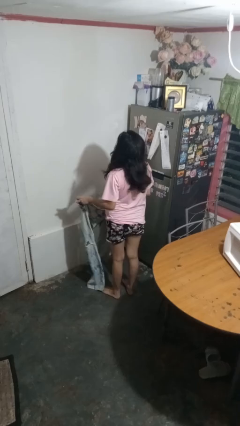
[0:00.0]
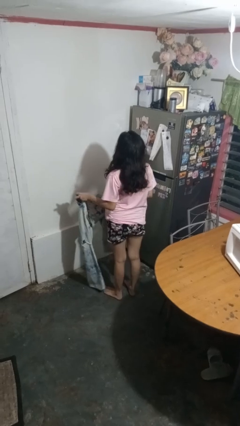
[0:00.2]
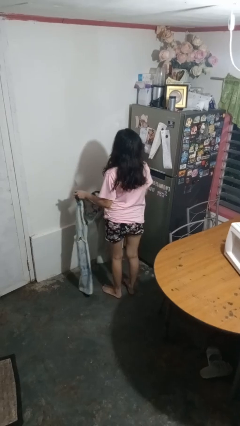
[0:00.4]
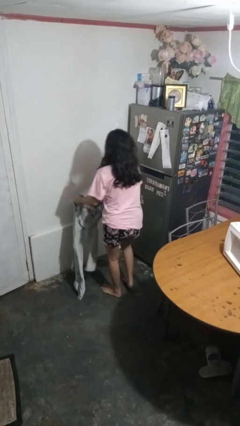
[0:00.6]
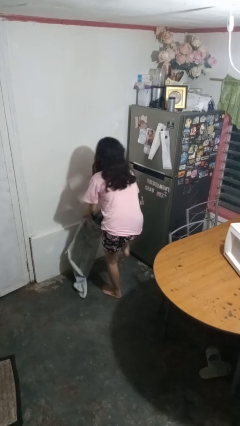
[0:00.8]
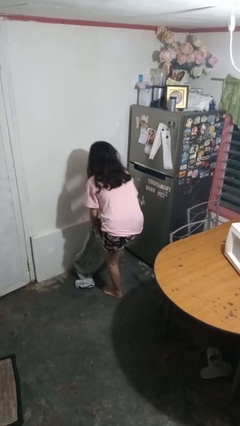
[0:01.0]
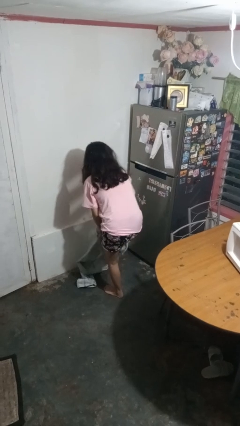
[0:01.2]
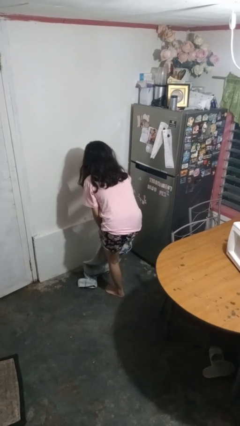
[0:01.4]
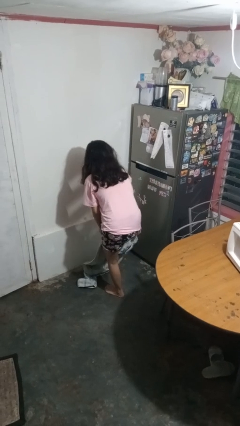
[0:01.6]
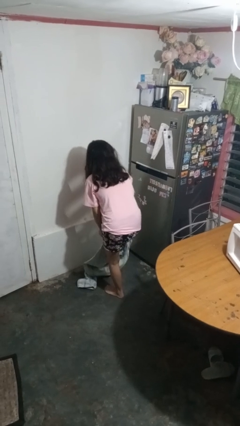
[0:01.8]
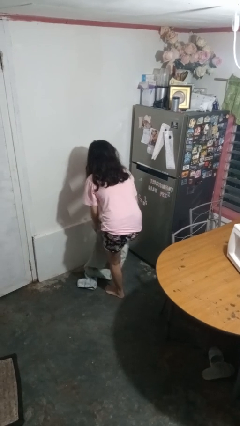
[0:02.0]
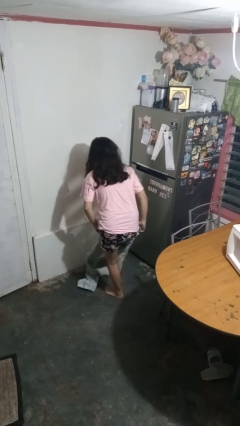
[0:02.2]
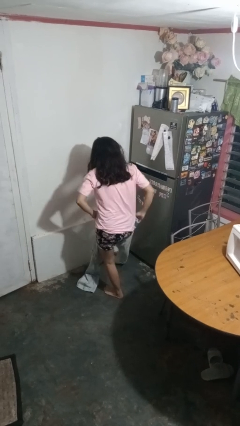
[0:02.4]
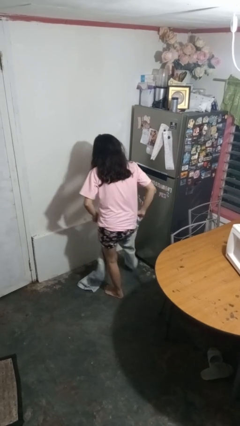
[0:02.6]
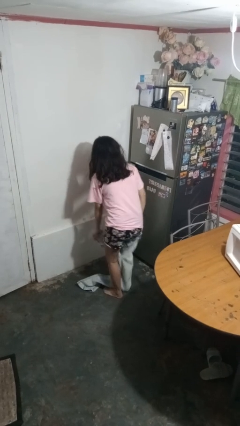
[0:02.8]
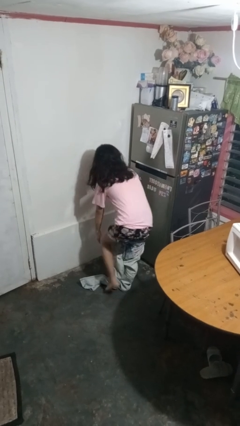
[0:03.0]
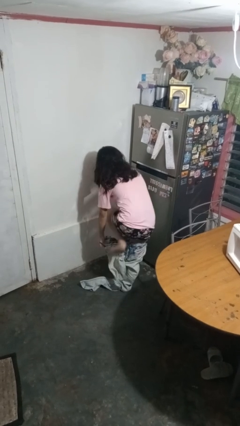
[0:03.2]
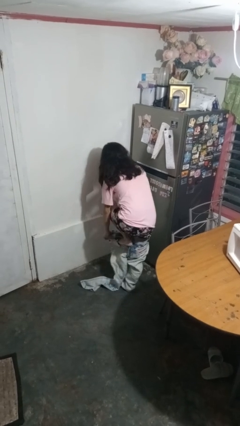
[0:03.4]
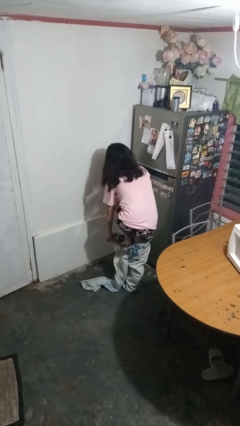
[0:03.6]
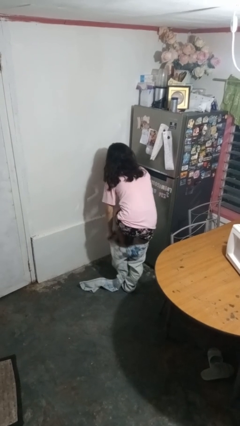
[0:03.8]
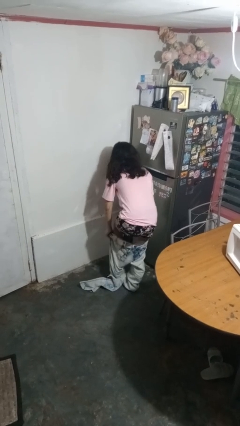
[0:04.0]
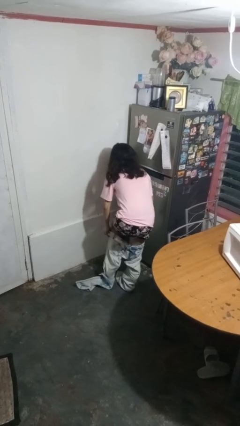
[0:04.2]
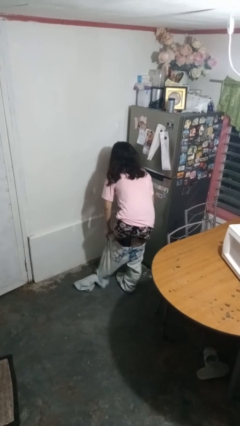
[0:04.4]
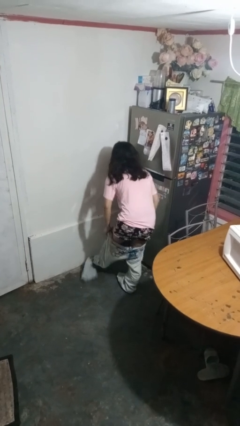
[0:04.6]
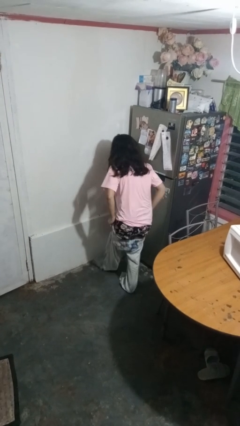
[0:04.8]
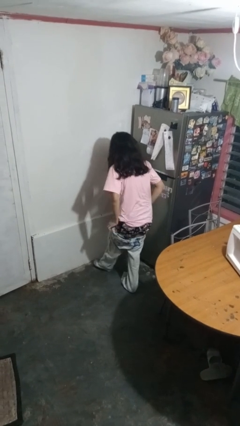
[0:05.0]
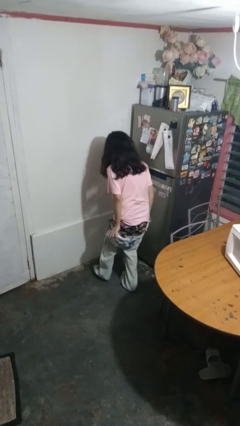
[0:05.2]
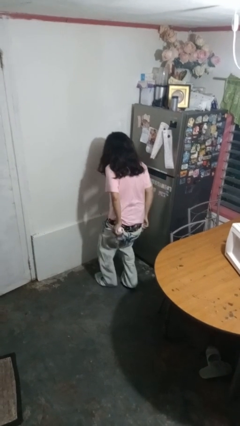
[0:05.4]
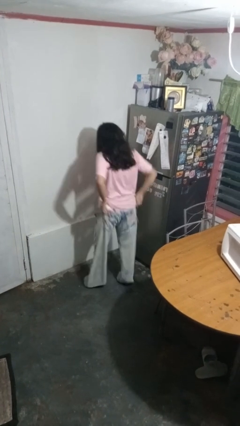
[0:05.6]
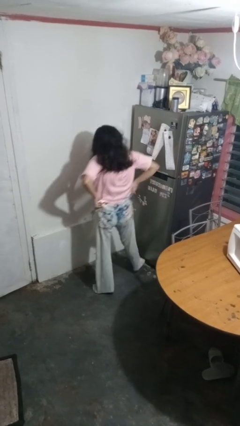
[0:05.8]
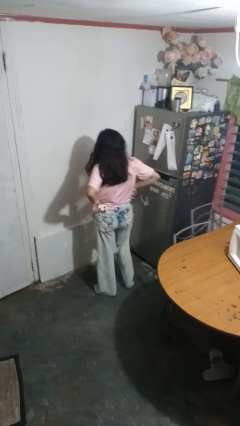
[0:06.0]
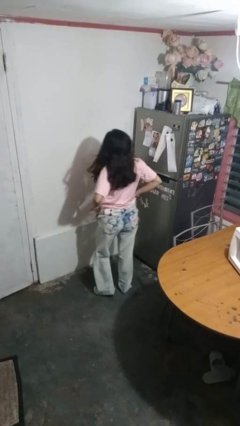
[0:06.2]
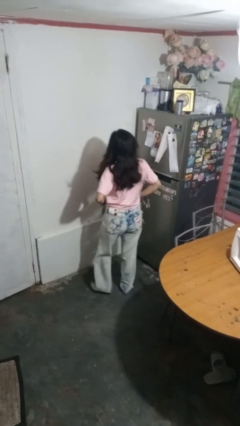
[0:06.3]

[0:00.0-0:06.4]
person puts on pants

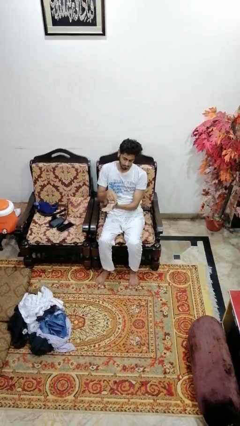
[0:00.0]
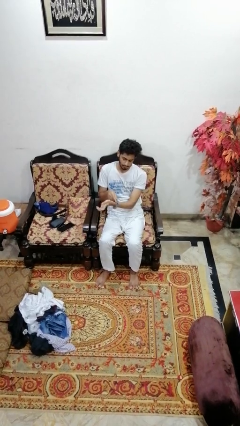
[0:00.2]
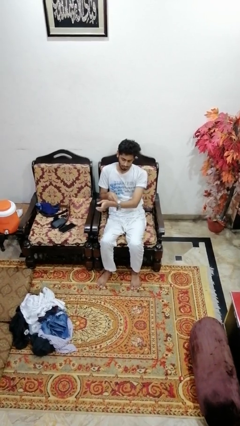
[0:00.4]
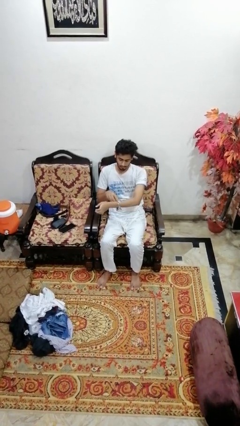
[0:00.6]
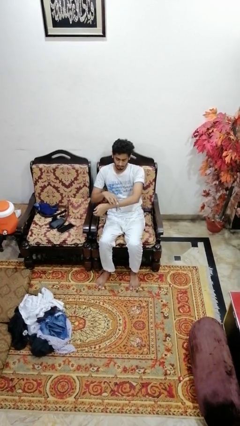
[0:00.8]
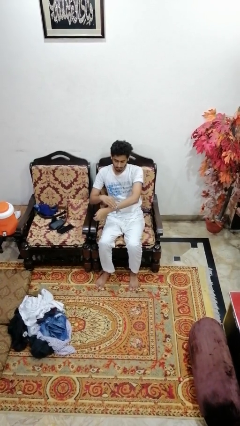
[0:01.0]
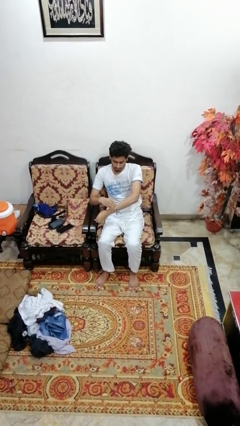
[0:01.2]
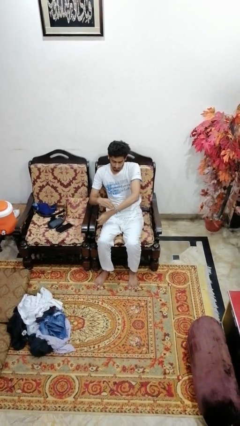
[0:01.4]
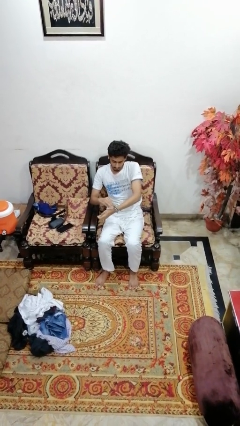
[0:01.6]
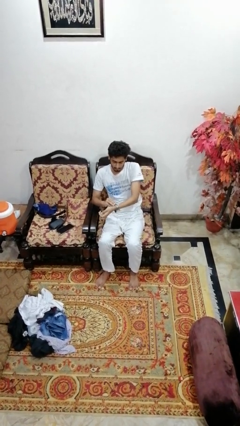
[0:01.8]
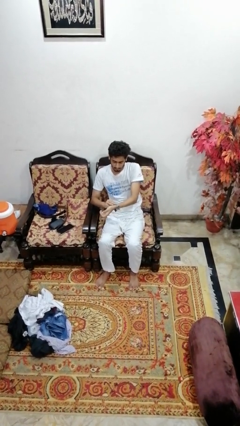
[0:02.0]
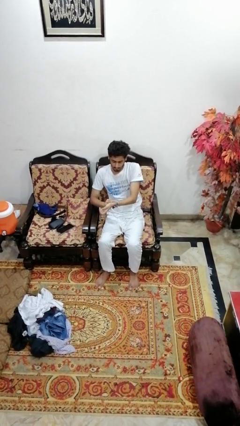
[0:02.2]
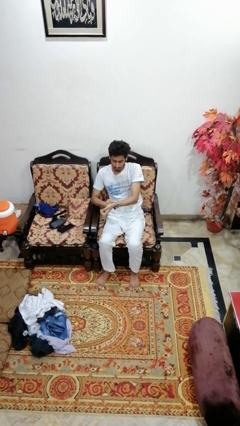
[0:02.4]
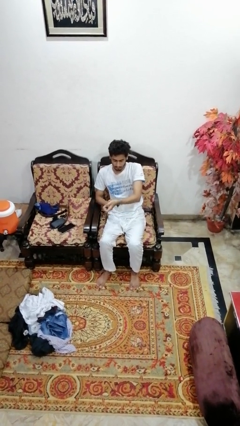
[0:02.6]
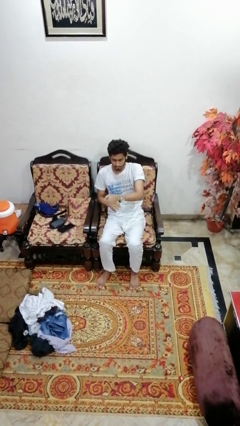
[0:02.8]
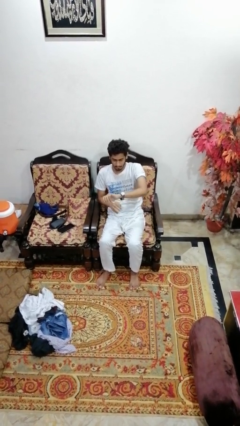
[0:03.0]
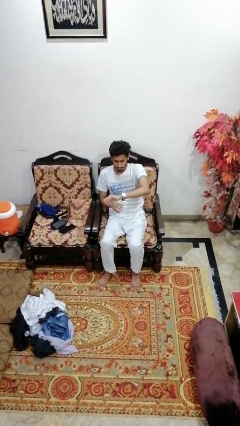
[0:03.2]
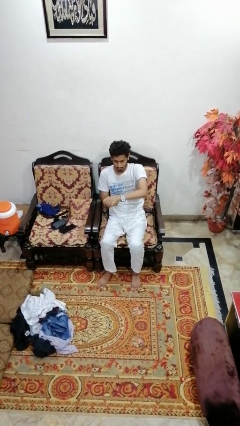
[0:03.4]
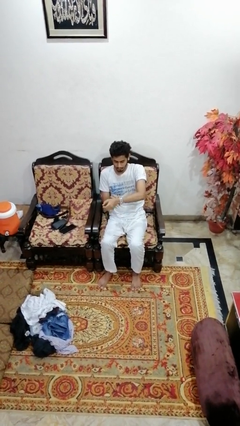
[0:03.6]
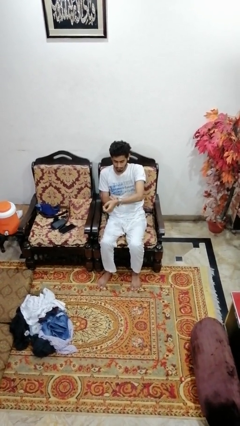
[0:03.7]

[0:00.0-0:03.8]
person puts on wristwatch

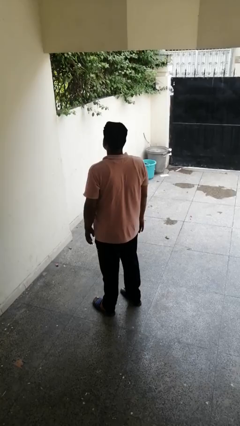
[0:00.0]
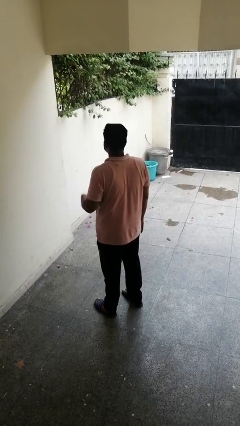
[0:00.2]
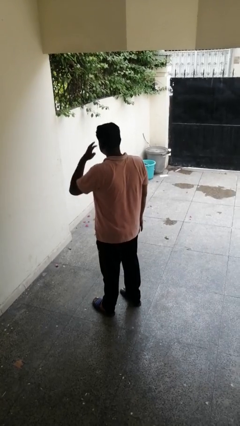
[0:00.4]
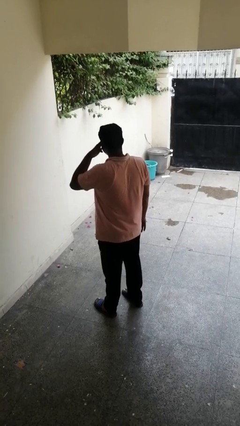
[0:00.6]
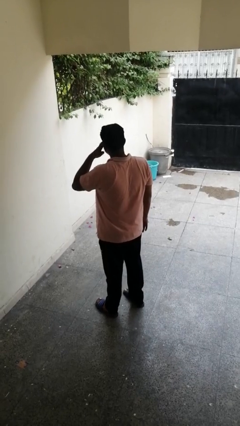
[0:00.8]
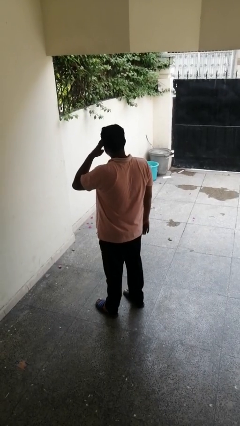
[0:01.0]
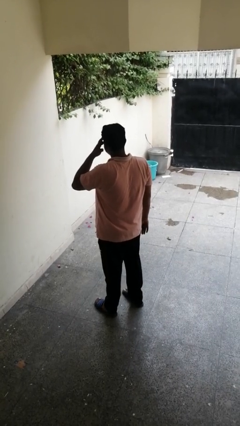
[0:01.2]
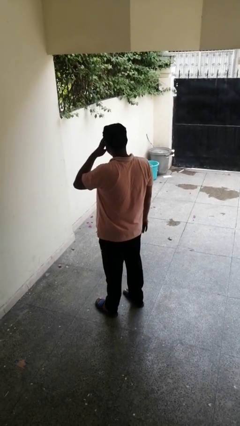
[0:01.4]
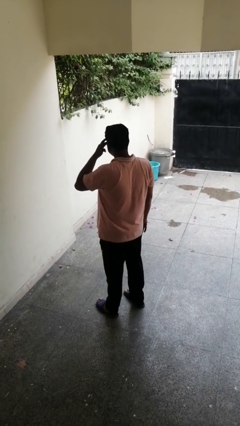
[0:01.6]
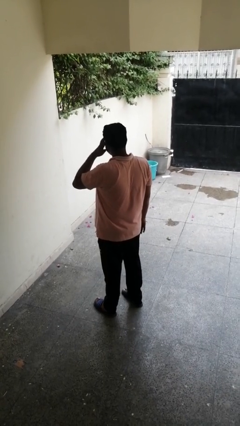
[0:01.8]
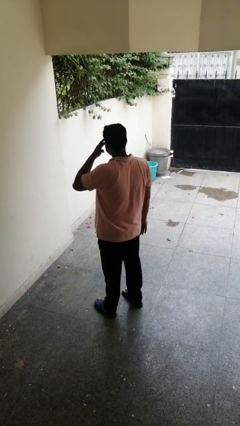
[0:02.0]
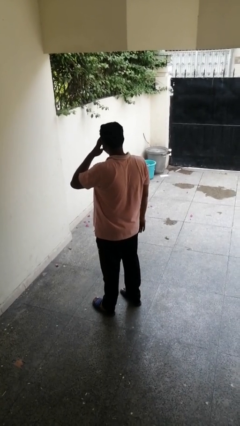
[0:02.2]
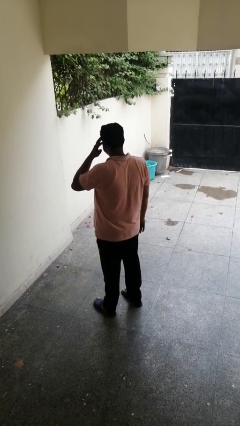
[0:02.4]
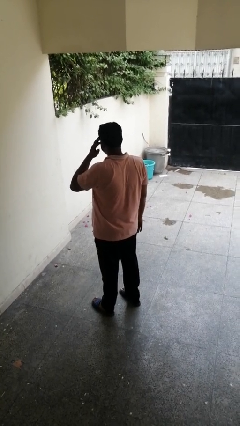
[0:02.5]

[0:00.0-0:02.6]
person rubs eyes

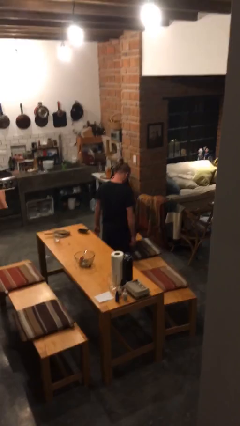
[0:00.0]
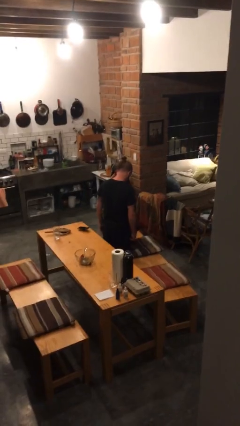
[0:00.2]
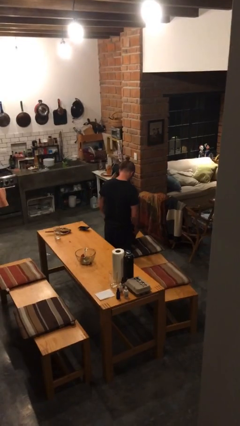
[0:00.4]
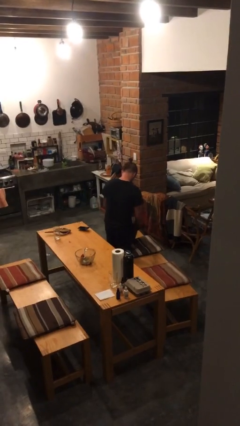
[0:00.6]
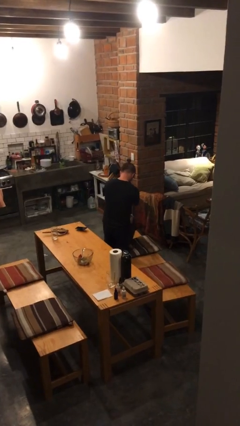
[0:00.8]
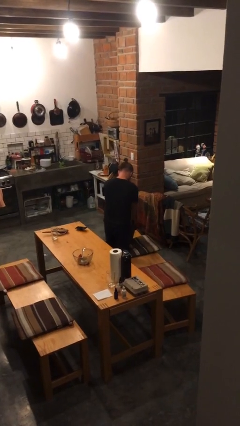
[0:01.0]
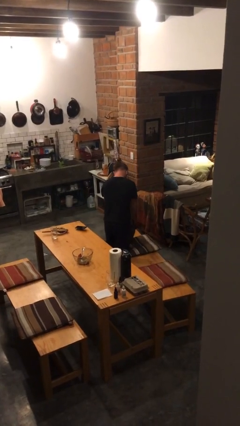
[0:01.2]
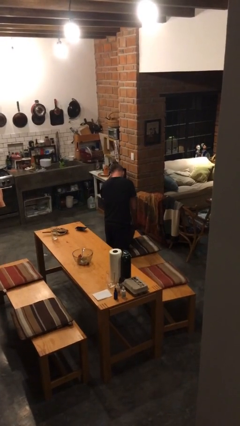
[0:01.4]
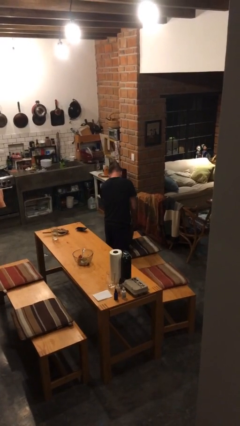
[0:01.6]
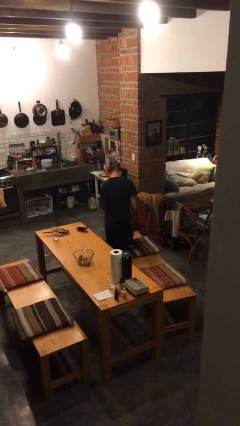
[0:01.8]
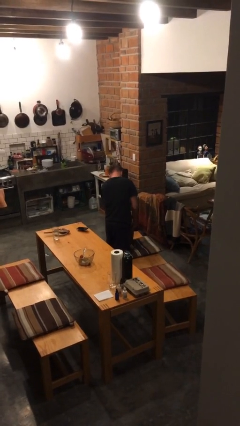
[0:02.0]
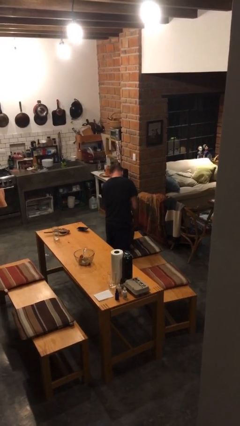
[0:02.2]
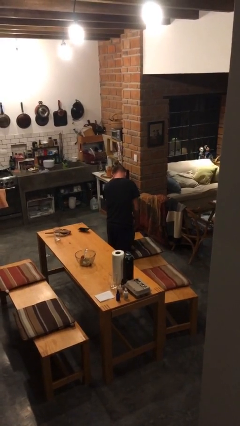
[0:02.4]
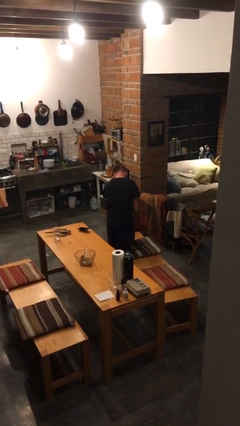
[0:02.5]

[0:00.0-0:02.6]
person searches in bag

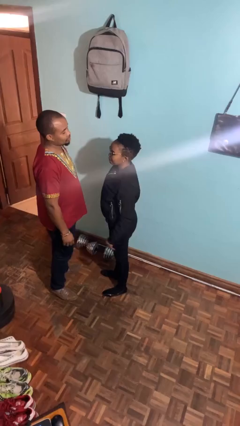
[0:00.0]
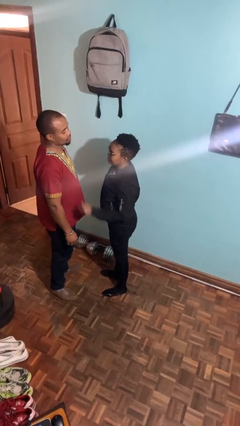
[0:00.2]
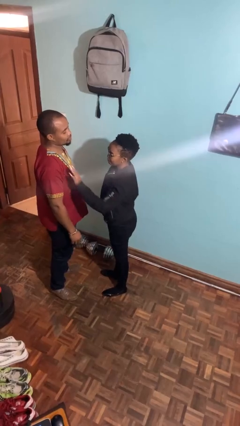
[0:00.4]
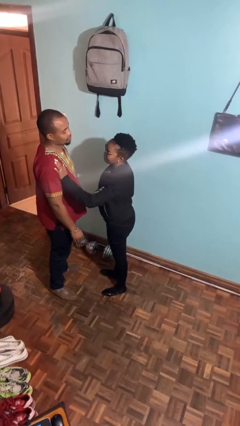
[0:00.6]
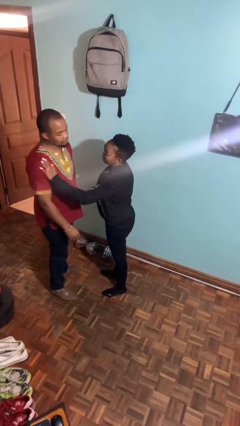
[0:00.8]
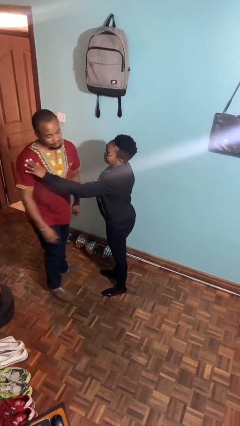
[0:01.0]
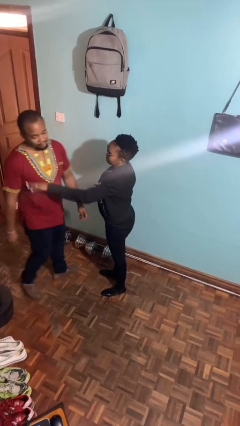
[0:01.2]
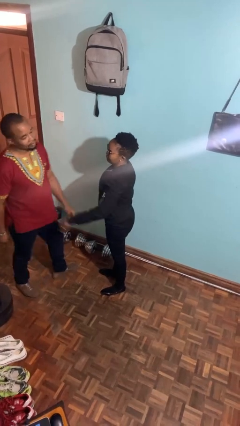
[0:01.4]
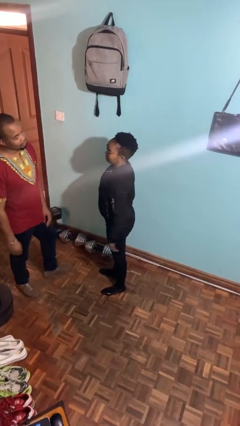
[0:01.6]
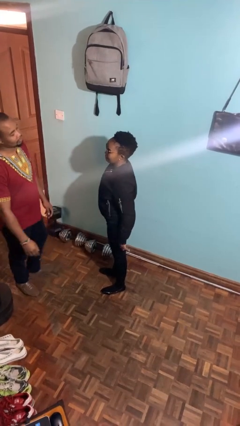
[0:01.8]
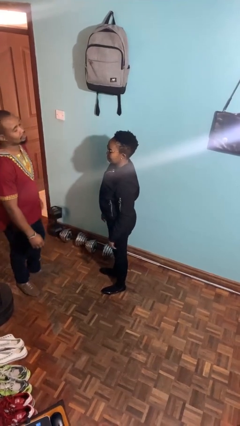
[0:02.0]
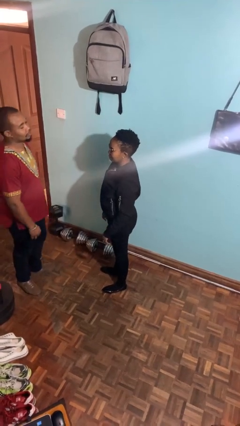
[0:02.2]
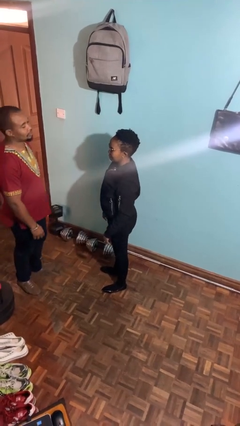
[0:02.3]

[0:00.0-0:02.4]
person shoves person

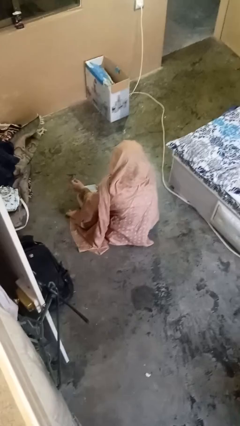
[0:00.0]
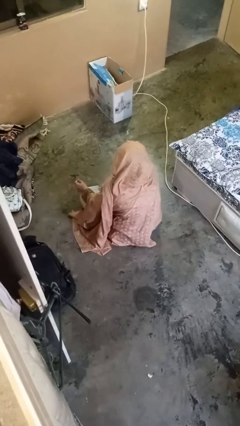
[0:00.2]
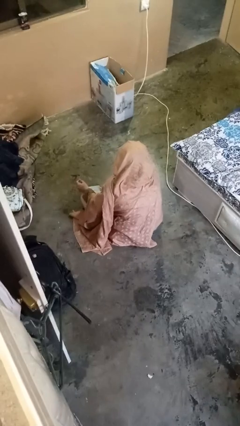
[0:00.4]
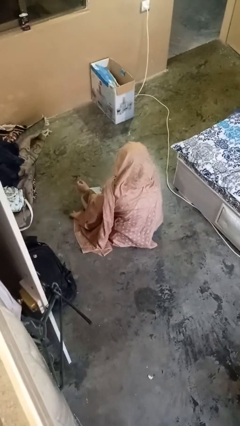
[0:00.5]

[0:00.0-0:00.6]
person takes off facemask
